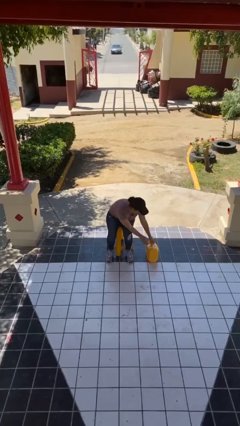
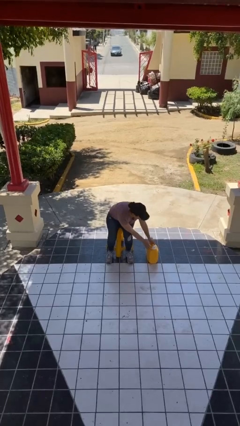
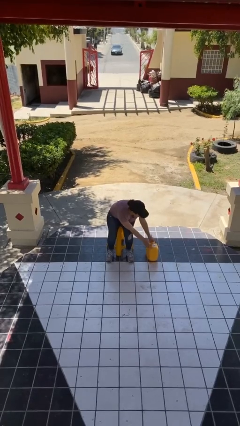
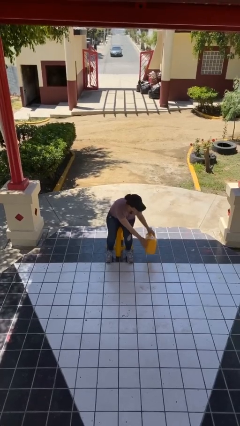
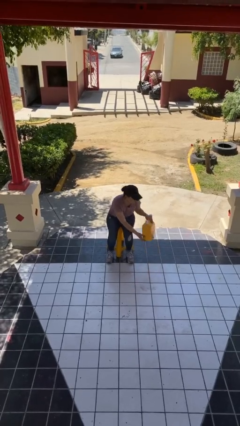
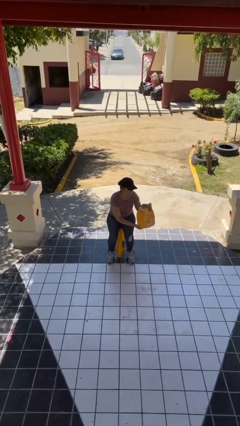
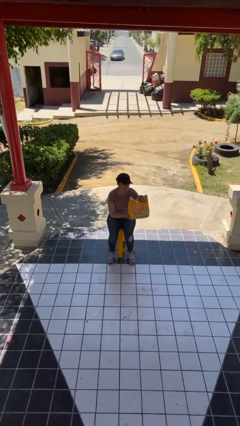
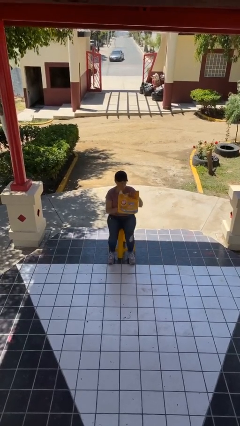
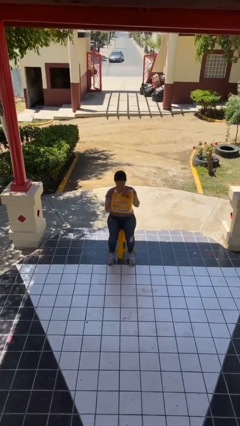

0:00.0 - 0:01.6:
person picks up object from floor

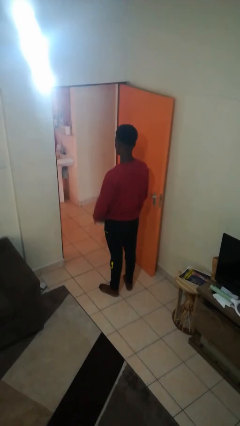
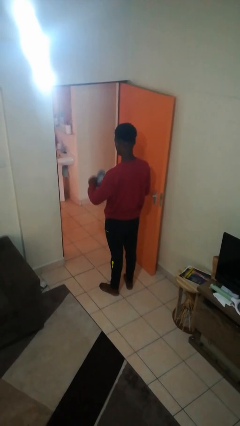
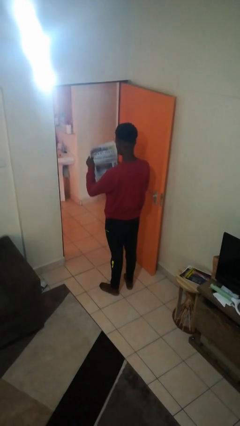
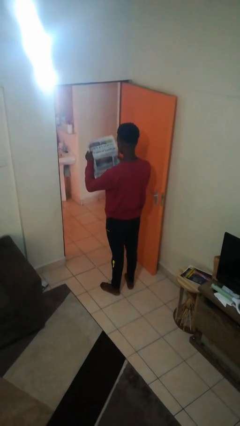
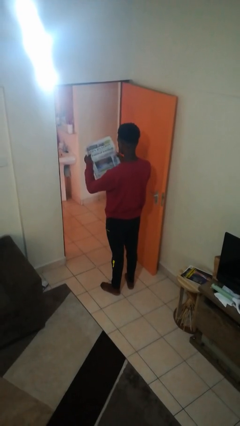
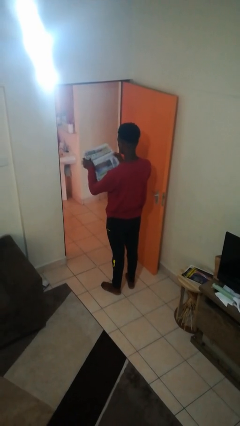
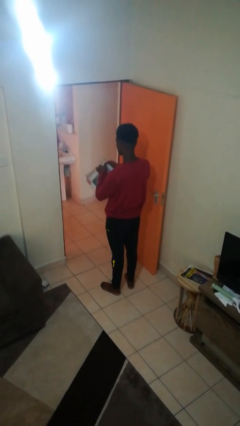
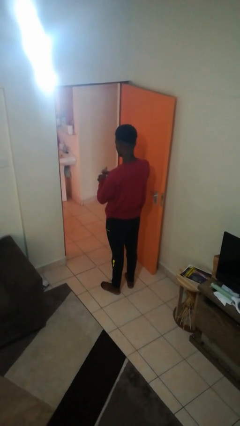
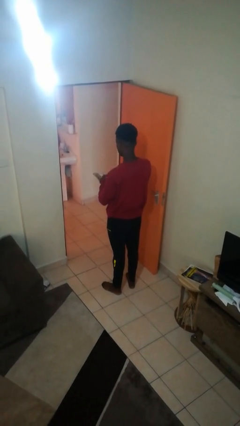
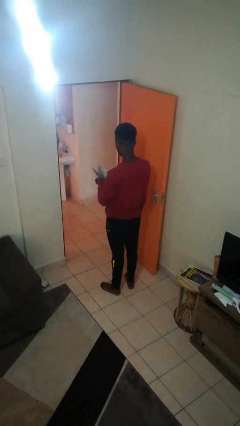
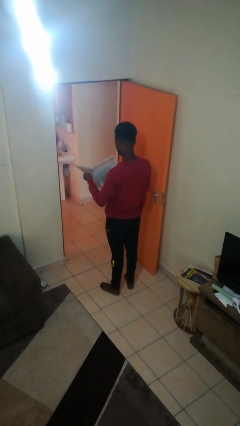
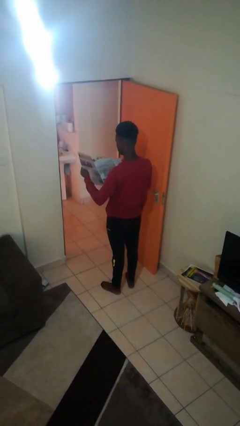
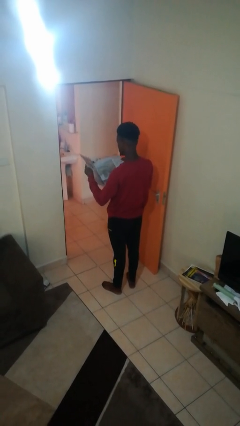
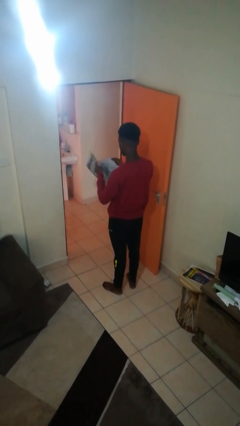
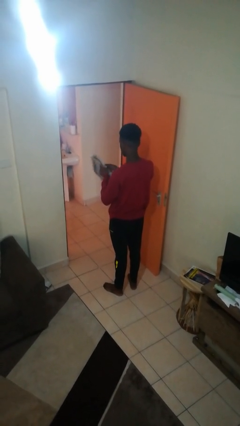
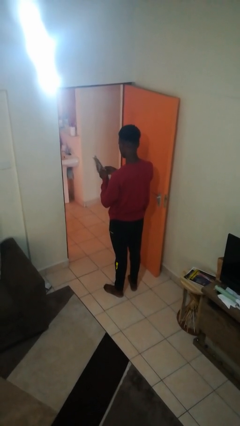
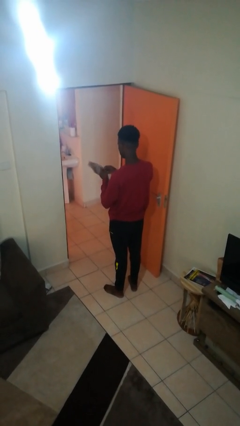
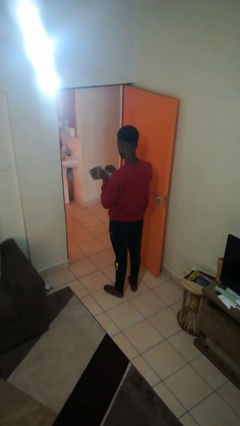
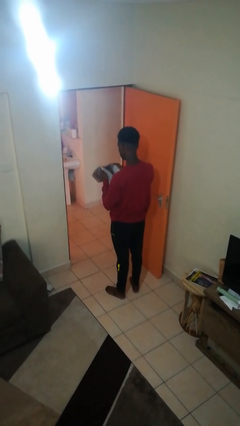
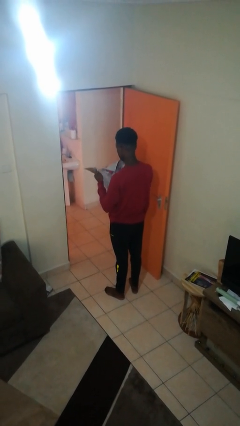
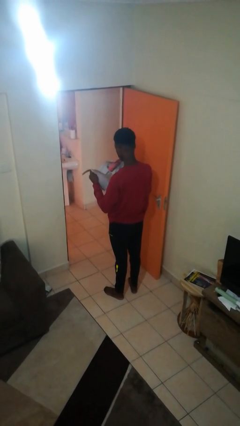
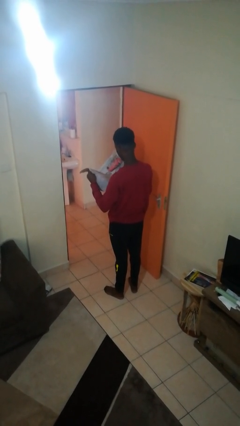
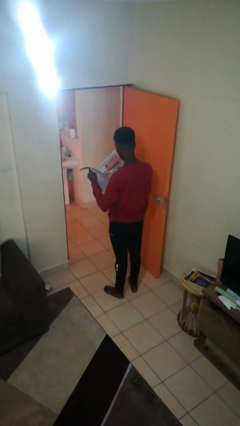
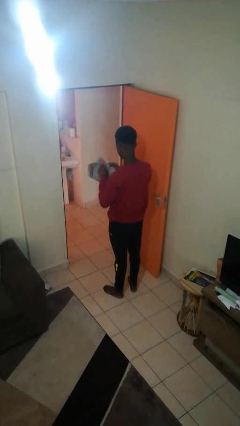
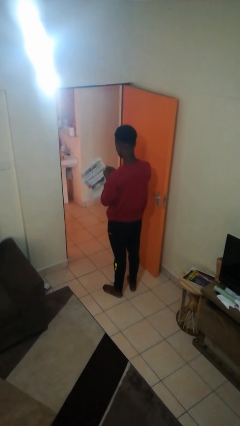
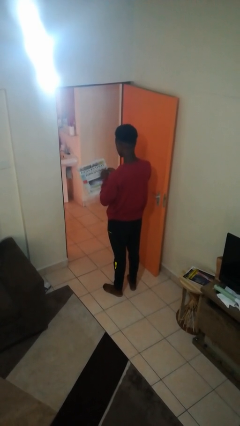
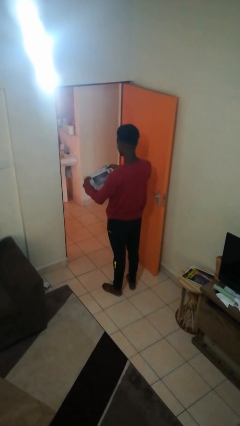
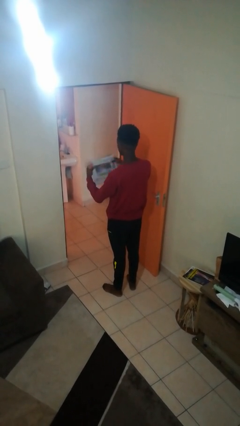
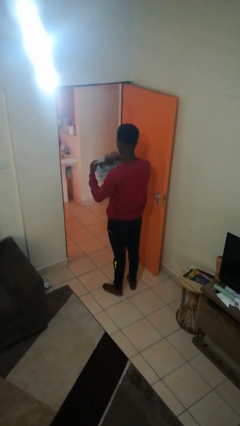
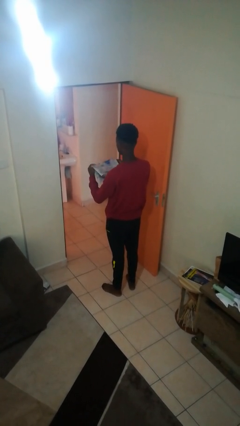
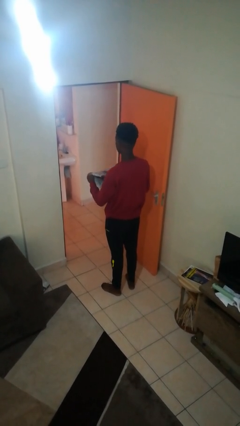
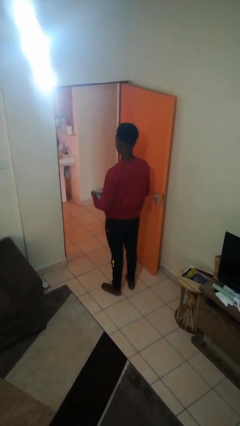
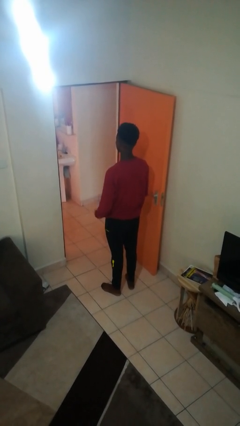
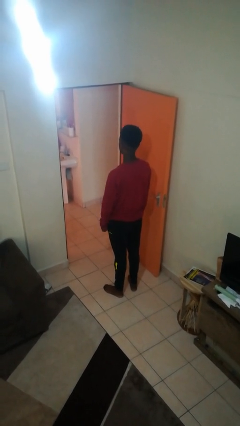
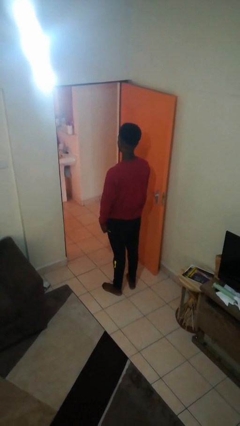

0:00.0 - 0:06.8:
person reads newspaper

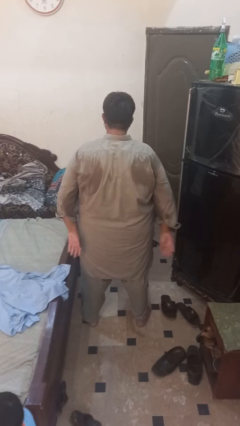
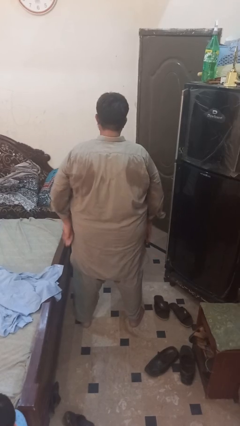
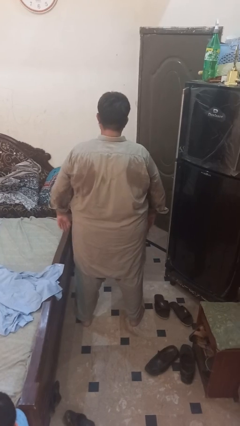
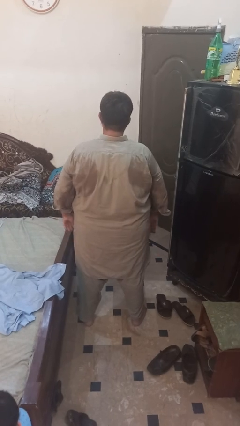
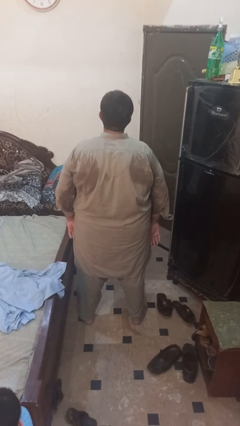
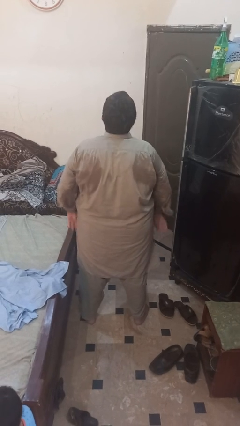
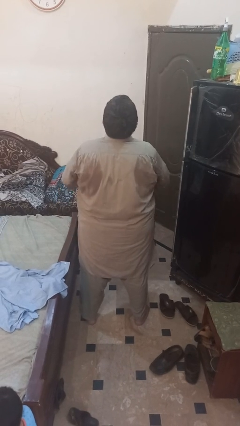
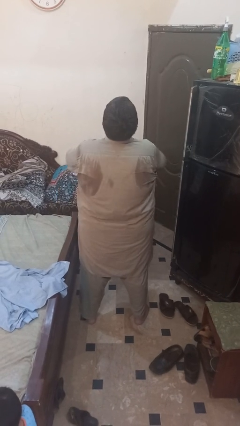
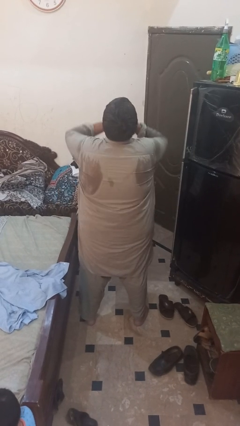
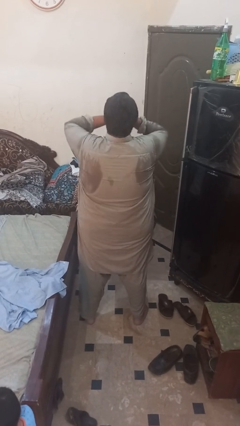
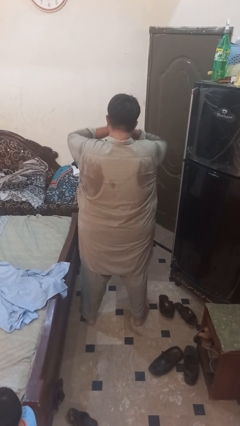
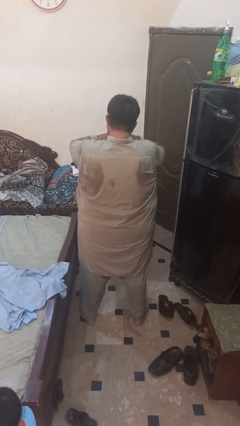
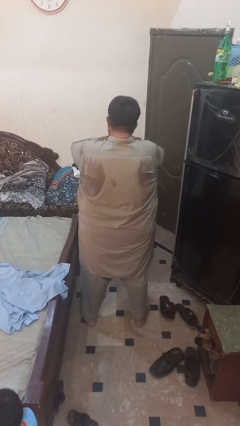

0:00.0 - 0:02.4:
person sneezes into hand

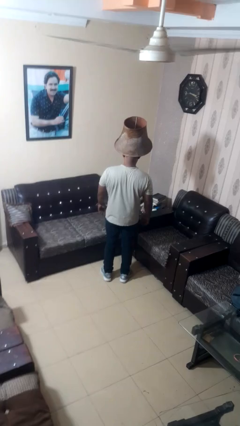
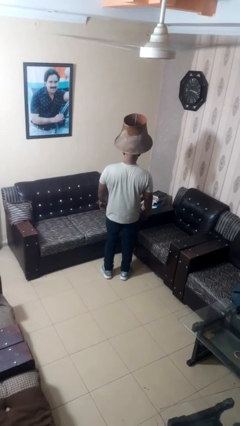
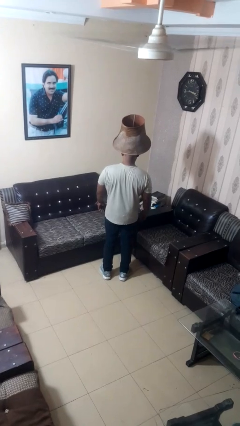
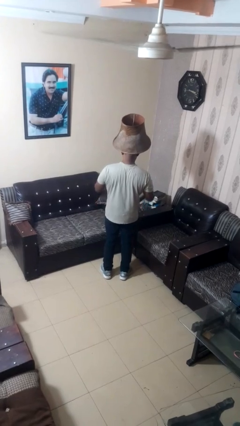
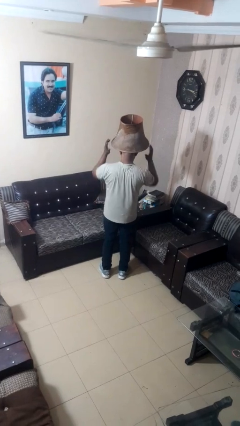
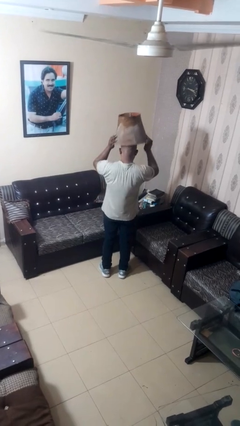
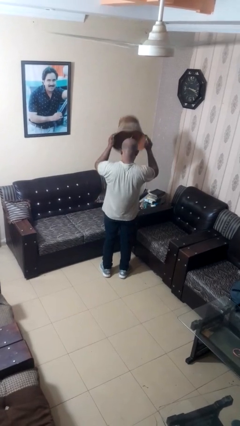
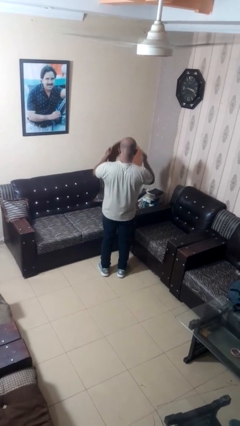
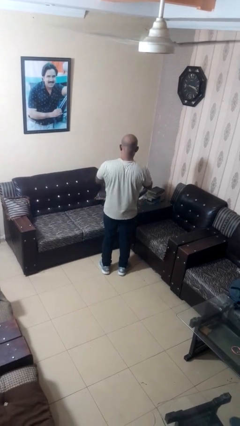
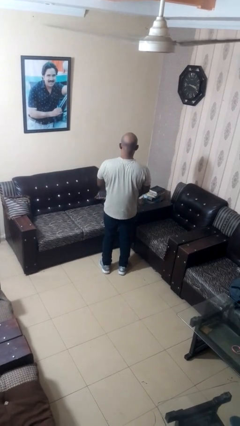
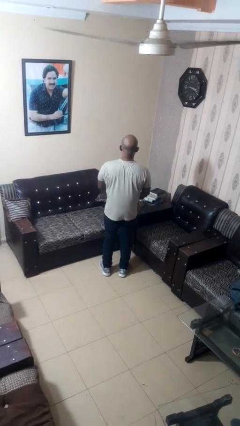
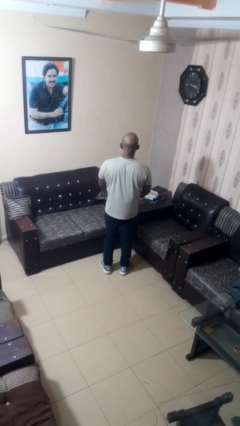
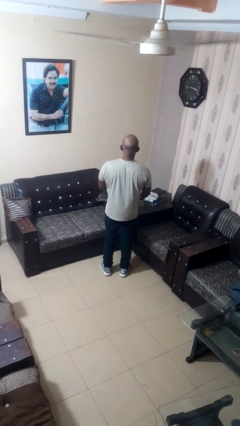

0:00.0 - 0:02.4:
person takes off hat

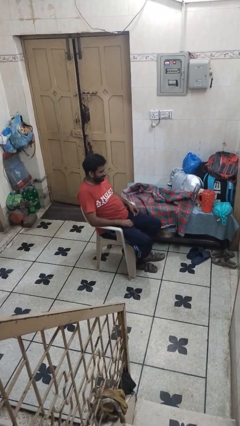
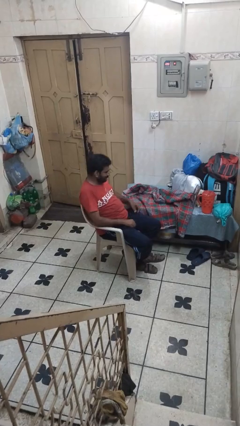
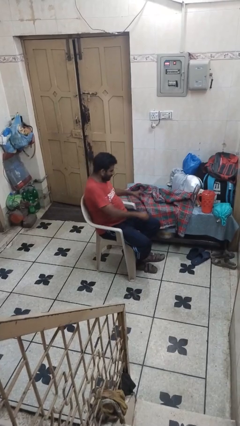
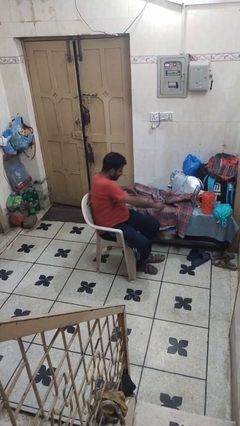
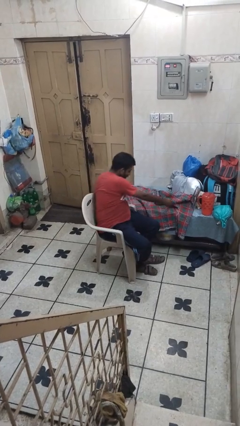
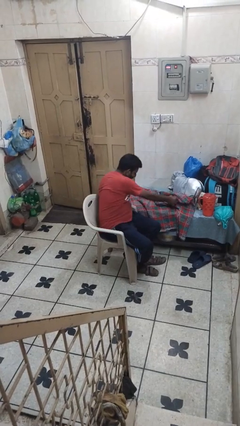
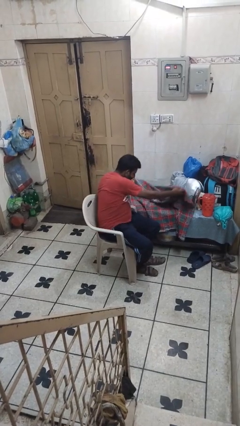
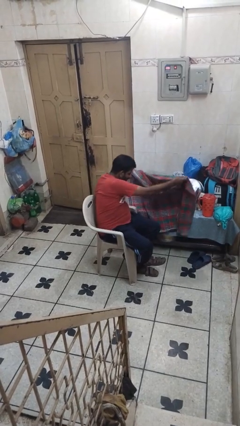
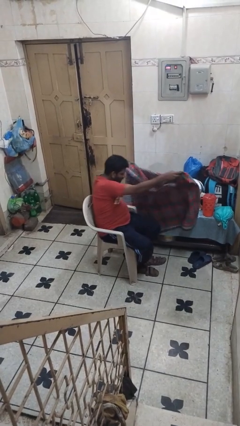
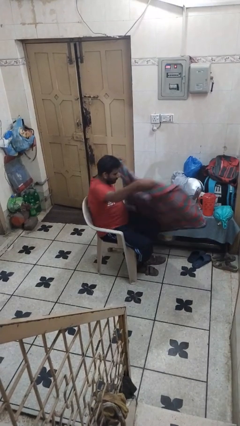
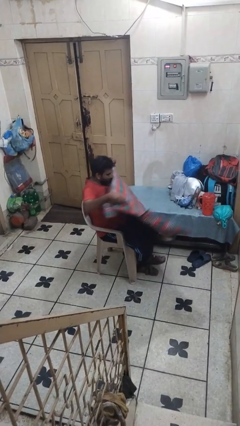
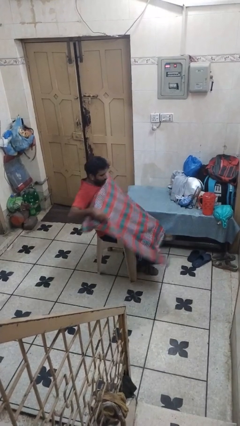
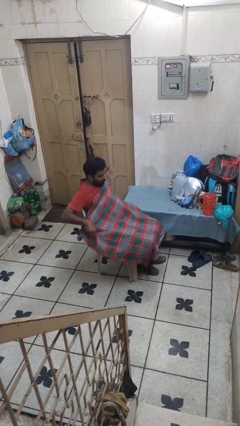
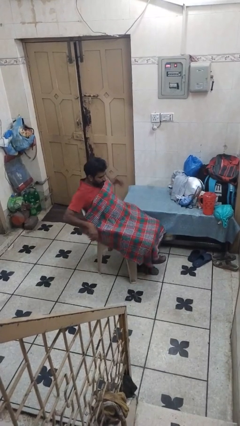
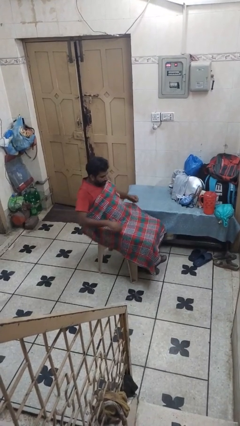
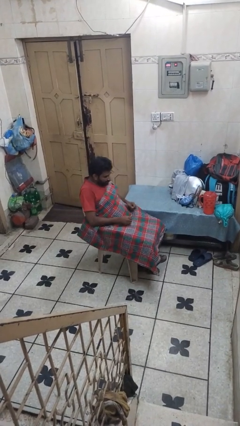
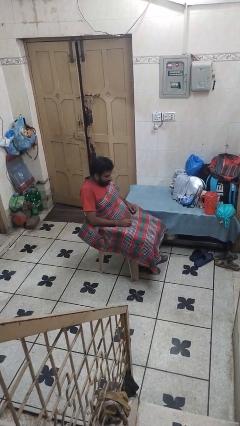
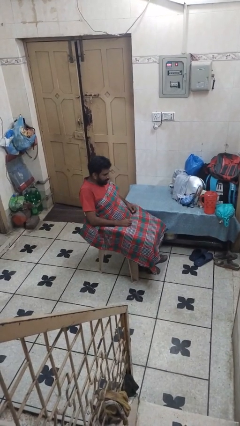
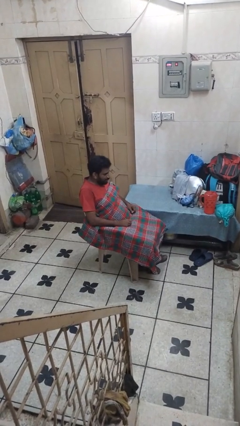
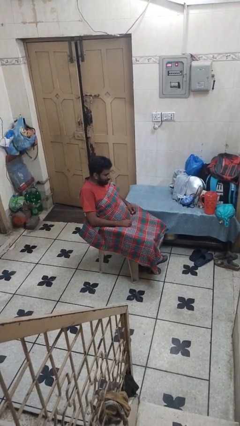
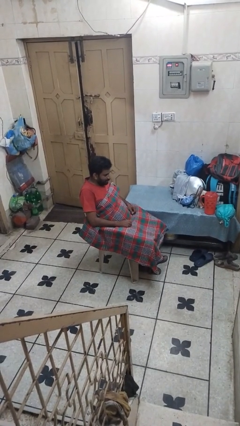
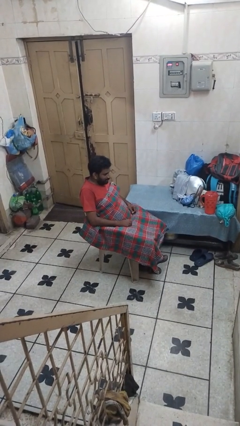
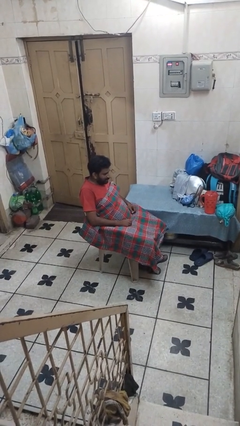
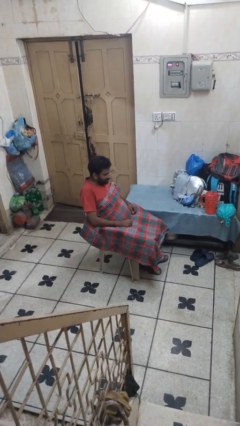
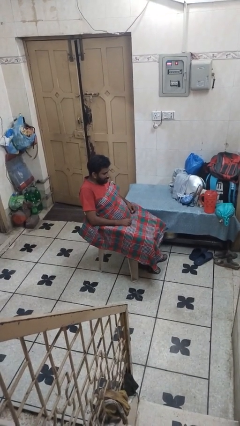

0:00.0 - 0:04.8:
person covers with blanket
